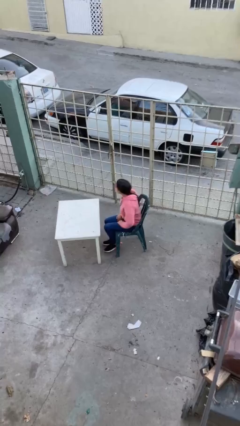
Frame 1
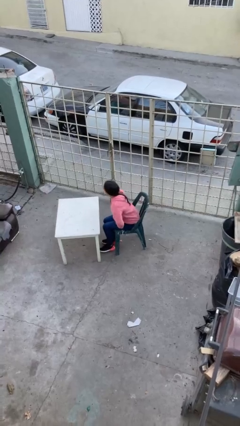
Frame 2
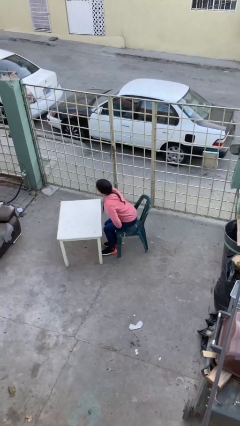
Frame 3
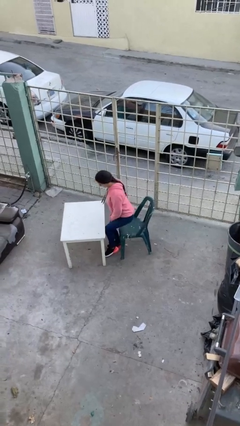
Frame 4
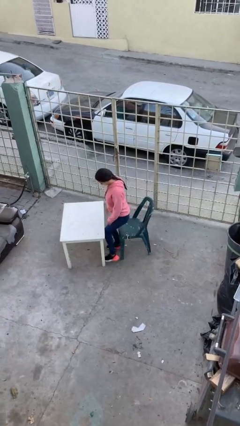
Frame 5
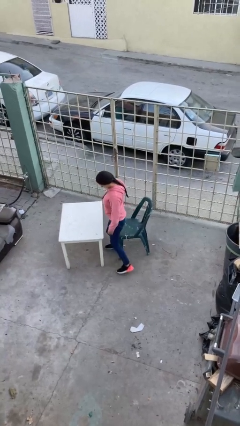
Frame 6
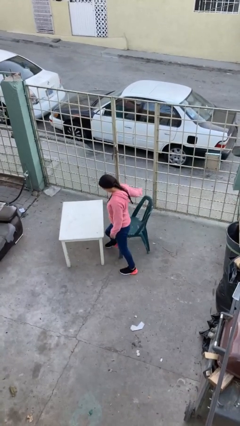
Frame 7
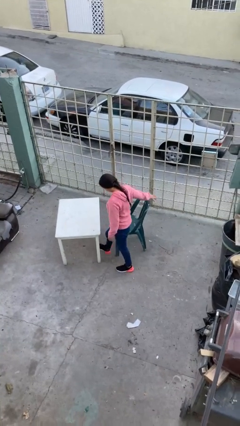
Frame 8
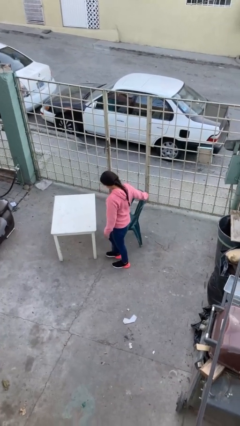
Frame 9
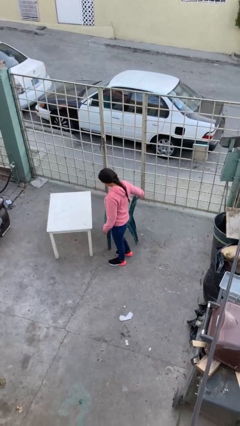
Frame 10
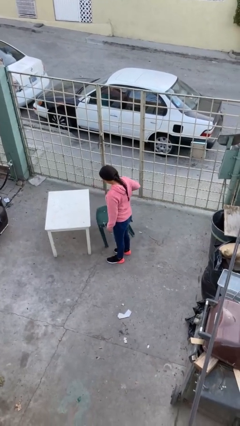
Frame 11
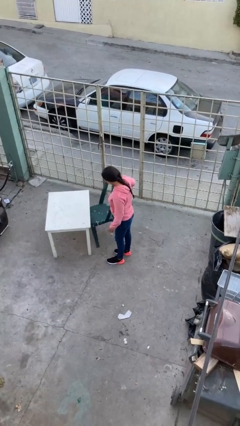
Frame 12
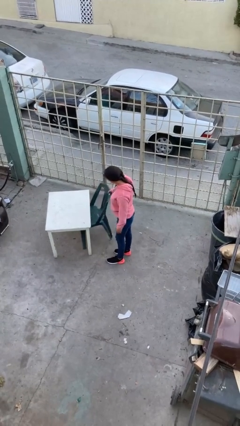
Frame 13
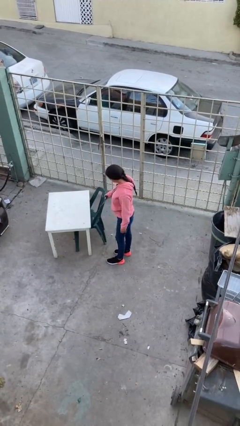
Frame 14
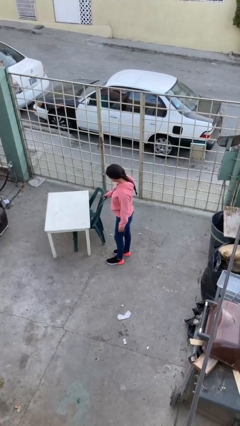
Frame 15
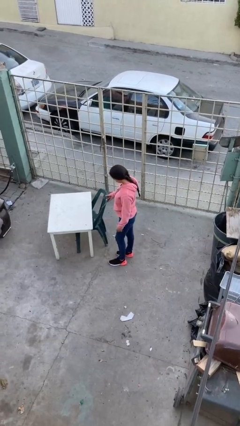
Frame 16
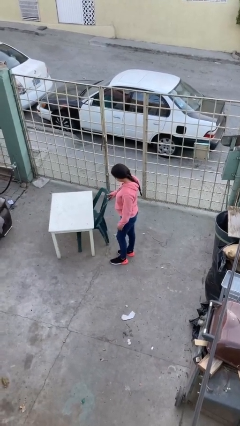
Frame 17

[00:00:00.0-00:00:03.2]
person stands up

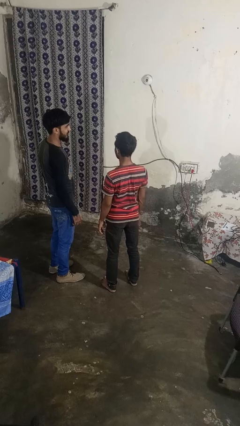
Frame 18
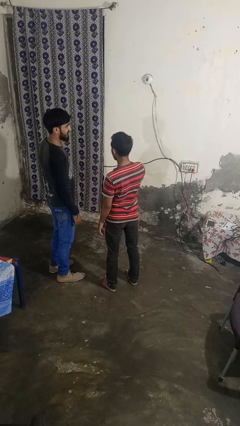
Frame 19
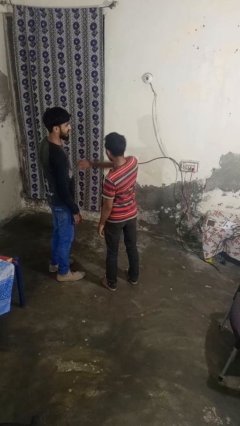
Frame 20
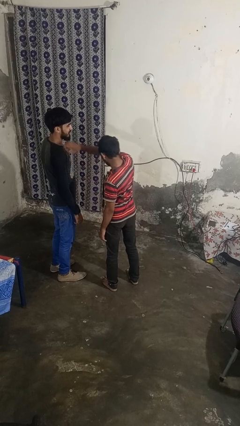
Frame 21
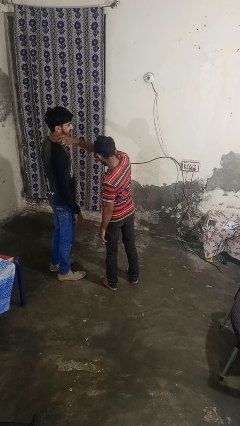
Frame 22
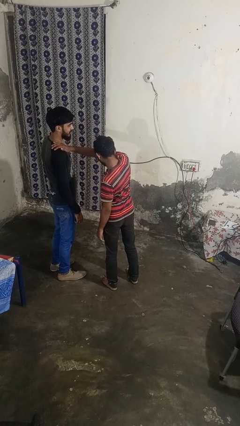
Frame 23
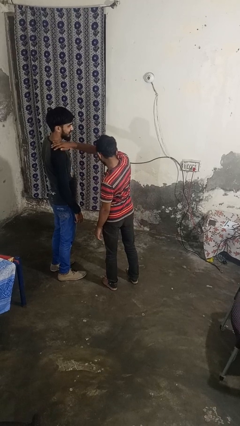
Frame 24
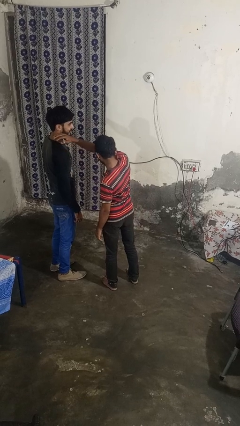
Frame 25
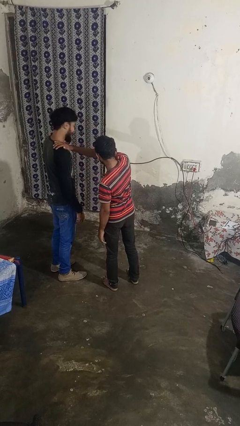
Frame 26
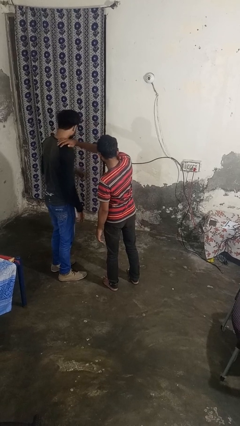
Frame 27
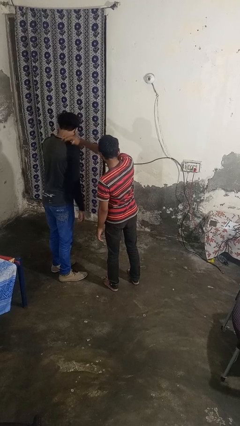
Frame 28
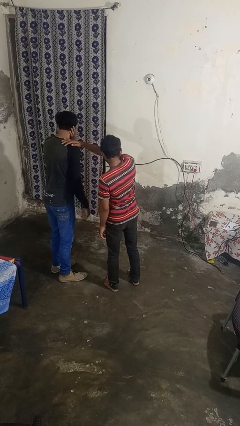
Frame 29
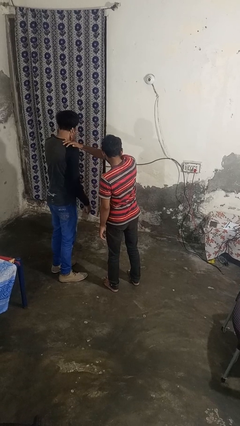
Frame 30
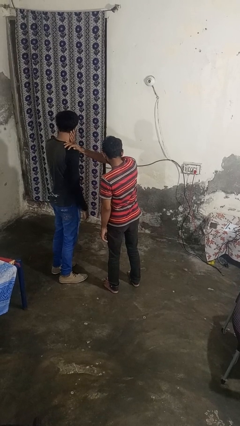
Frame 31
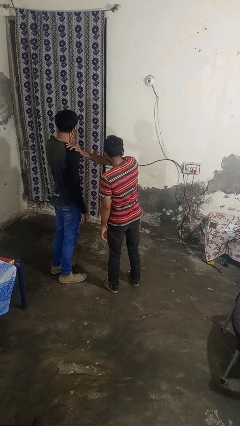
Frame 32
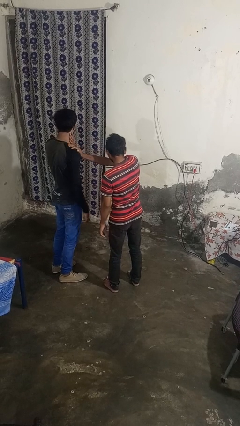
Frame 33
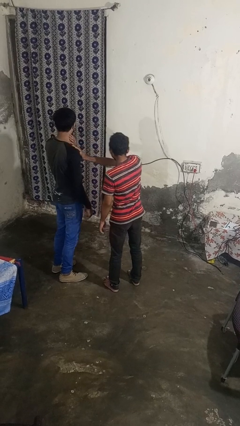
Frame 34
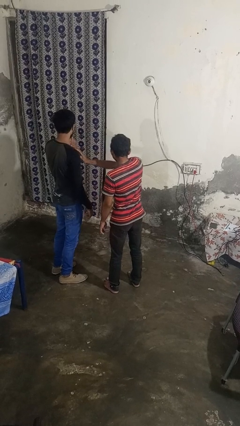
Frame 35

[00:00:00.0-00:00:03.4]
person pounds shoulders of person

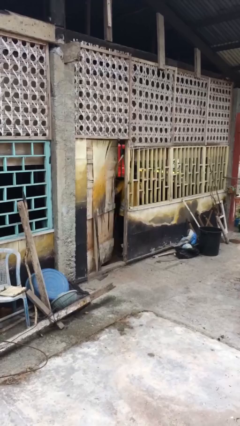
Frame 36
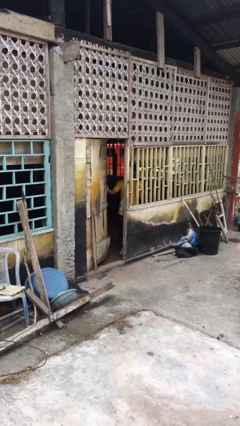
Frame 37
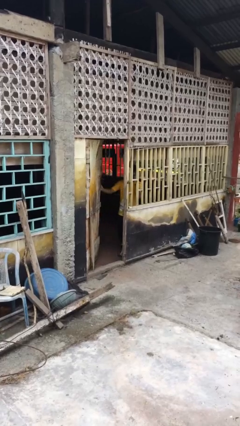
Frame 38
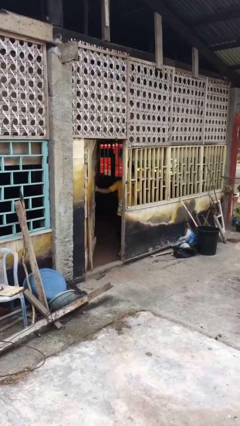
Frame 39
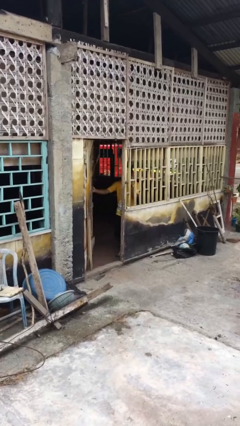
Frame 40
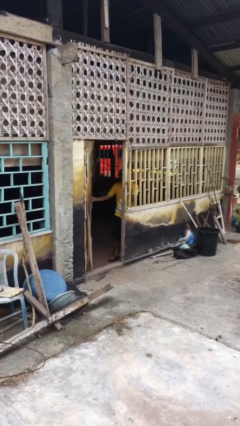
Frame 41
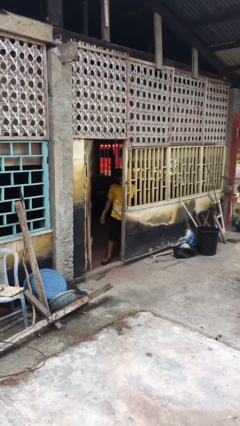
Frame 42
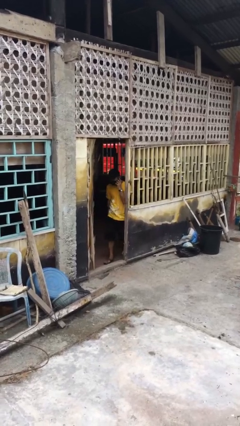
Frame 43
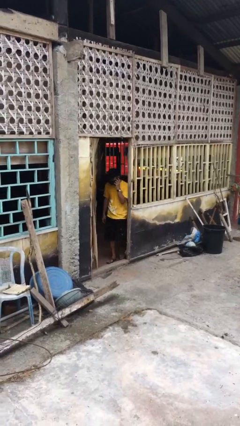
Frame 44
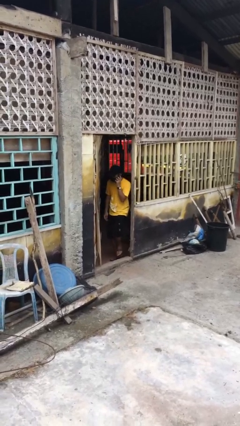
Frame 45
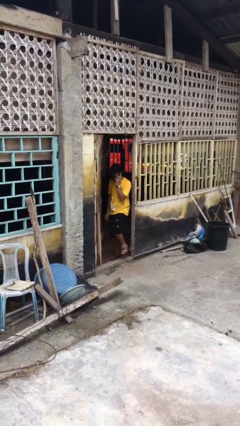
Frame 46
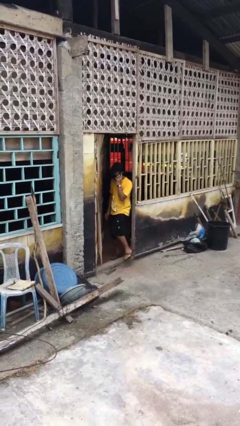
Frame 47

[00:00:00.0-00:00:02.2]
person opens facility door

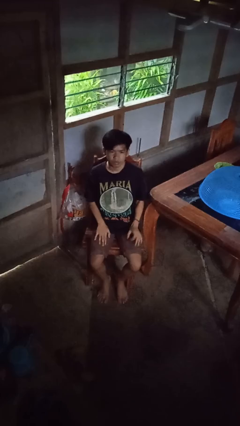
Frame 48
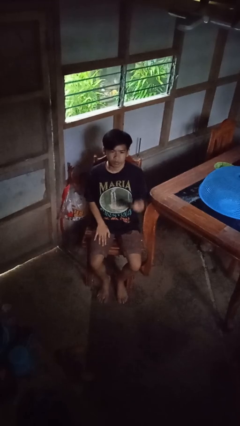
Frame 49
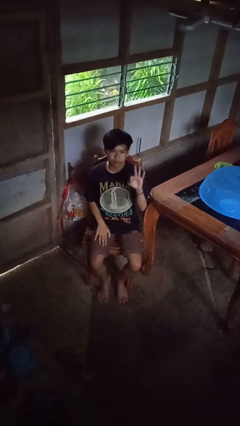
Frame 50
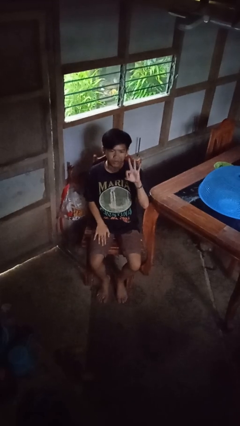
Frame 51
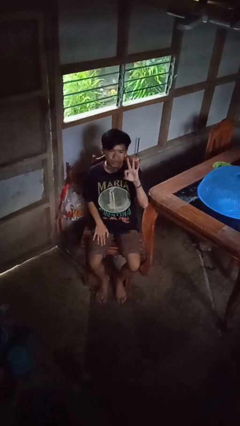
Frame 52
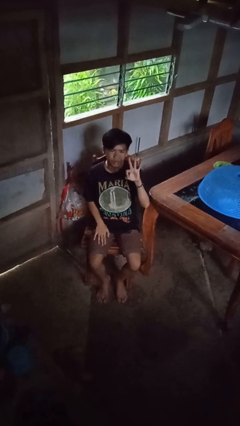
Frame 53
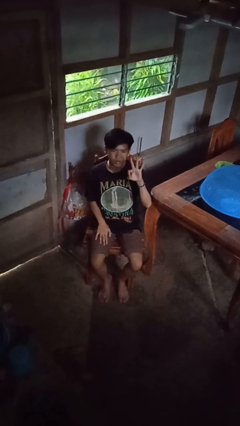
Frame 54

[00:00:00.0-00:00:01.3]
person gestures number three

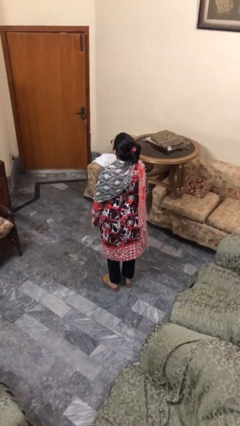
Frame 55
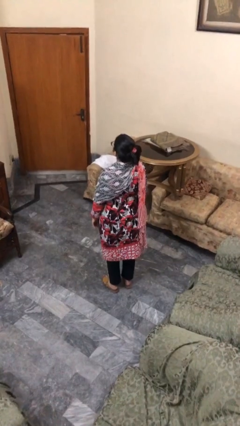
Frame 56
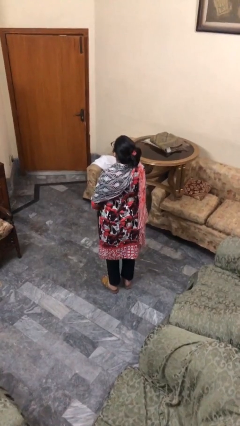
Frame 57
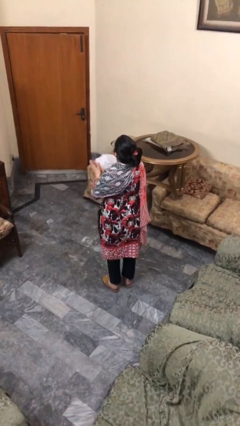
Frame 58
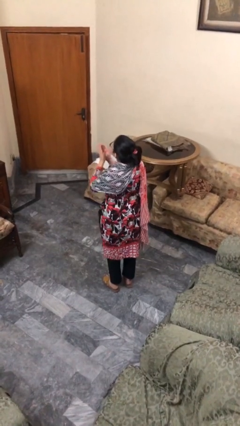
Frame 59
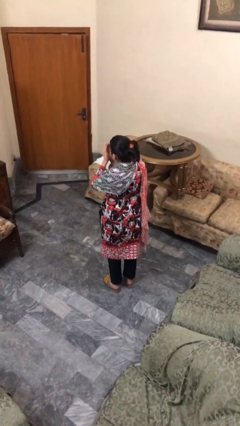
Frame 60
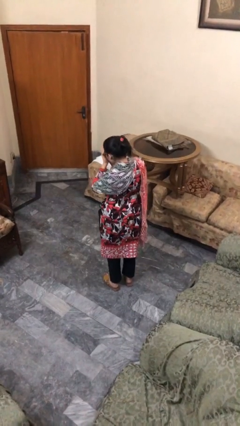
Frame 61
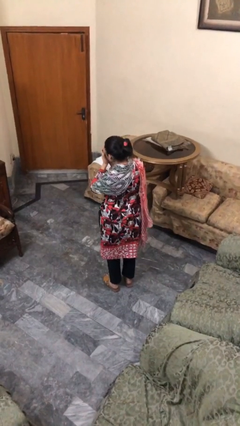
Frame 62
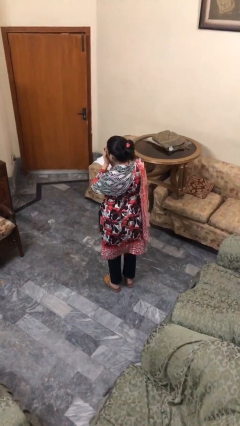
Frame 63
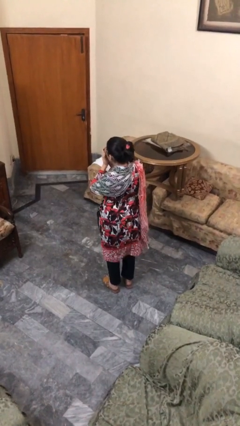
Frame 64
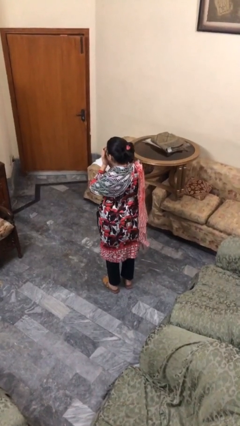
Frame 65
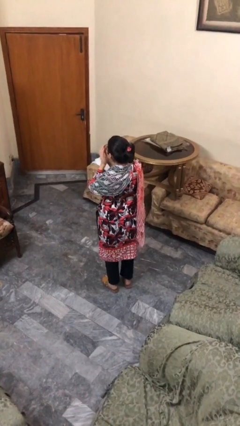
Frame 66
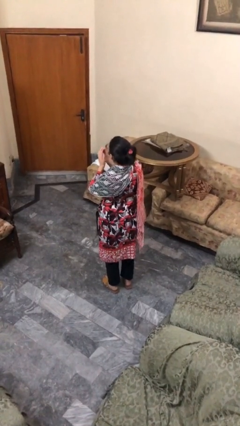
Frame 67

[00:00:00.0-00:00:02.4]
person sneezes into hand

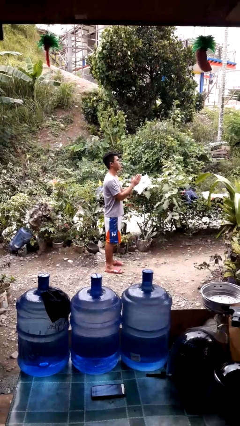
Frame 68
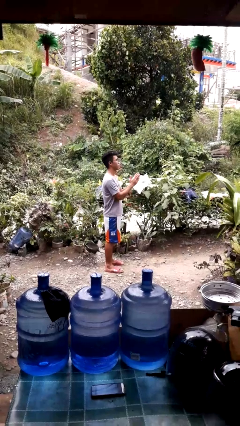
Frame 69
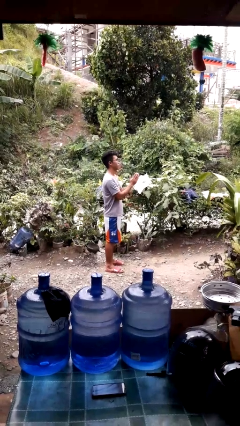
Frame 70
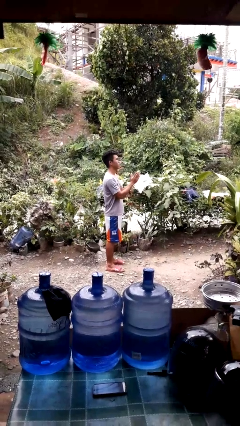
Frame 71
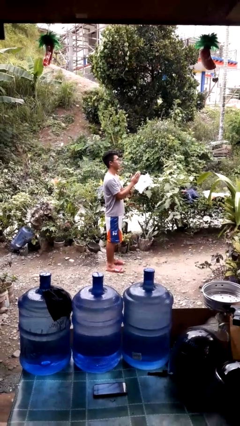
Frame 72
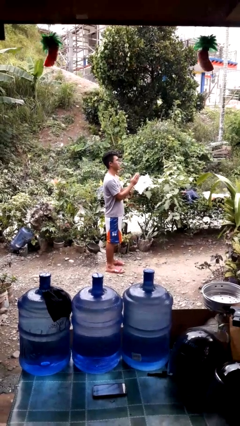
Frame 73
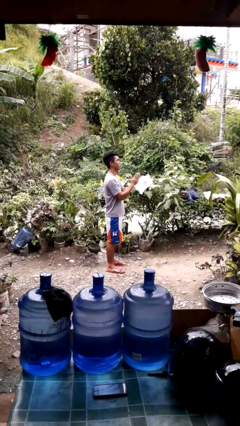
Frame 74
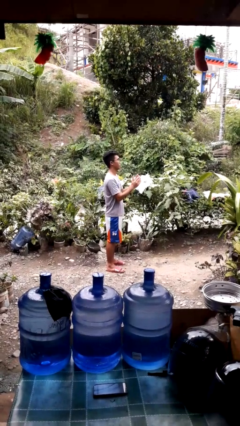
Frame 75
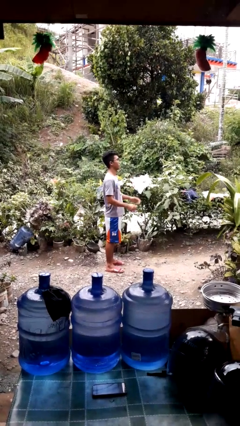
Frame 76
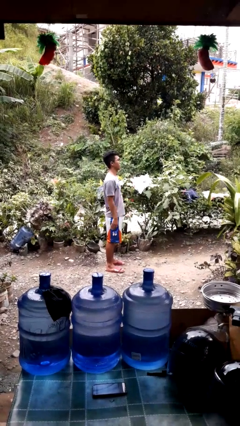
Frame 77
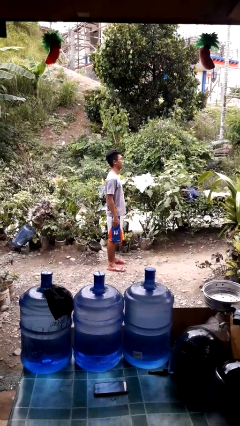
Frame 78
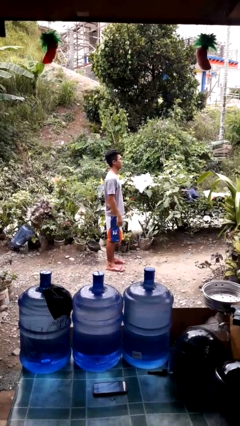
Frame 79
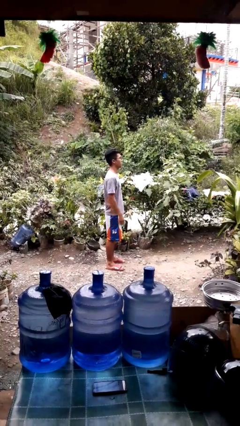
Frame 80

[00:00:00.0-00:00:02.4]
person claps hands

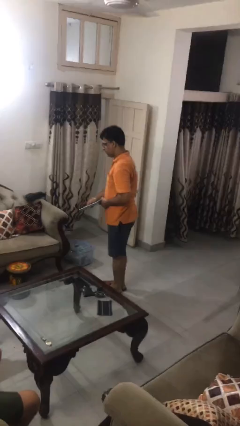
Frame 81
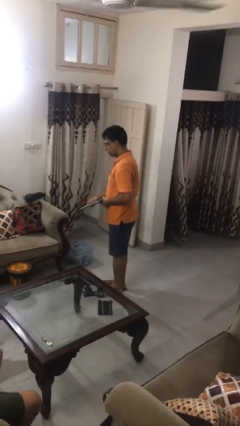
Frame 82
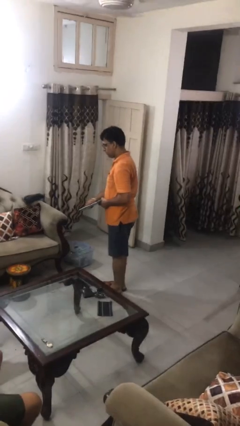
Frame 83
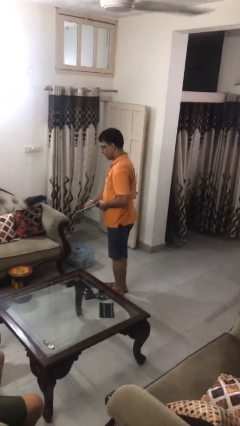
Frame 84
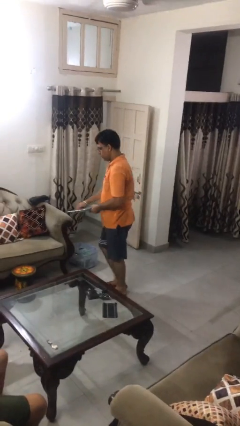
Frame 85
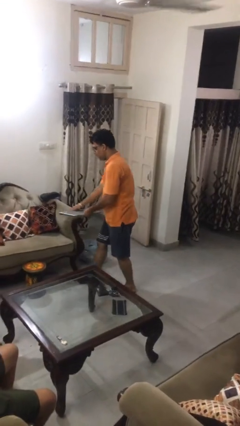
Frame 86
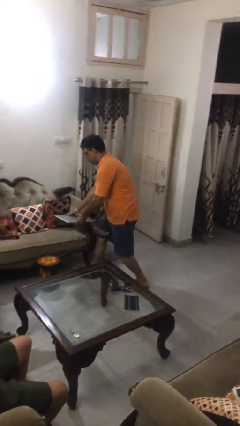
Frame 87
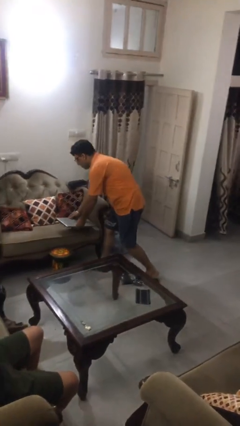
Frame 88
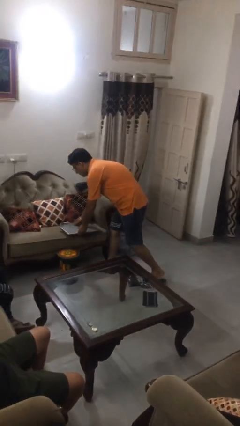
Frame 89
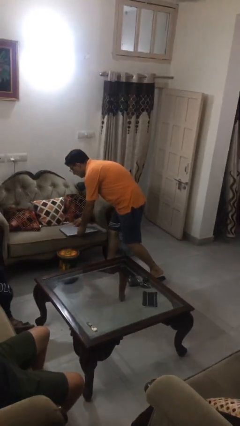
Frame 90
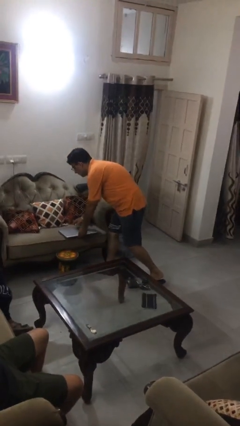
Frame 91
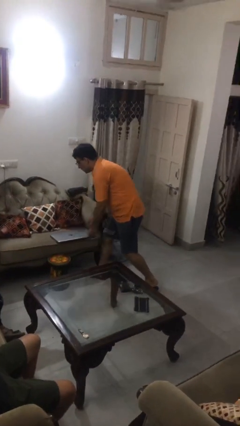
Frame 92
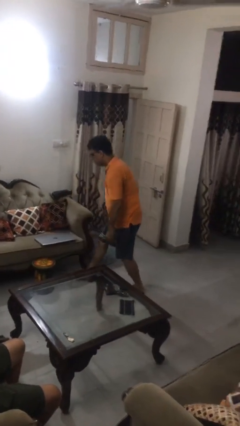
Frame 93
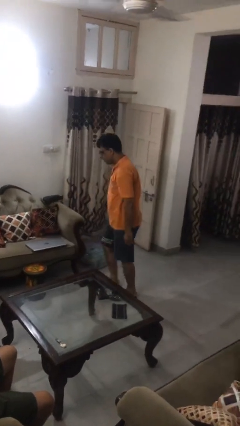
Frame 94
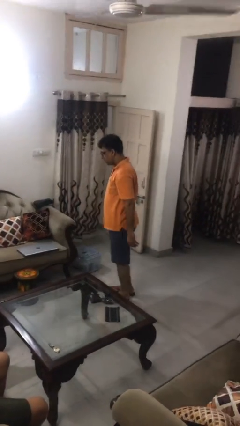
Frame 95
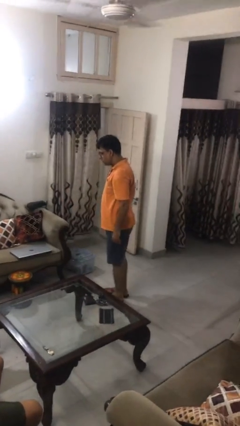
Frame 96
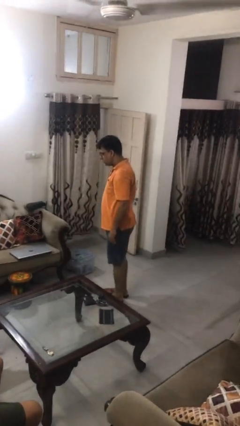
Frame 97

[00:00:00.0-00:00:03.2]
person puts down object on couch
